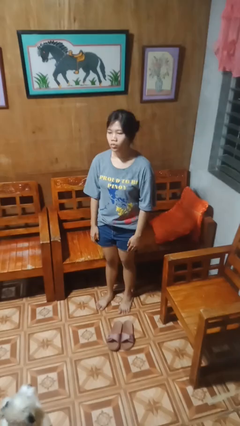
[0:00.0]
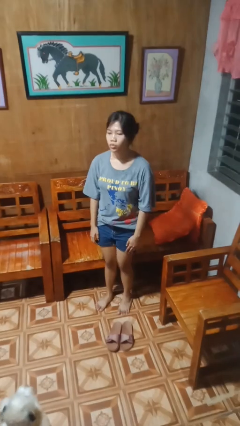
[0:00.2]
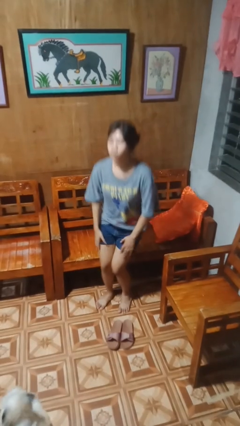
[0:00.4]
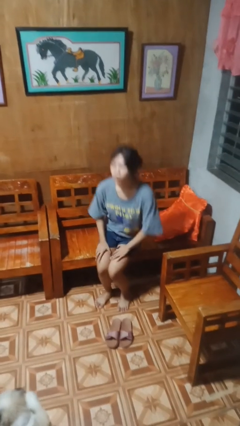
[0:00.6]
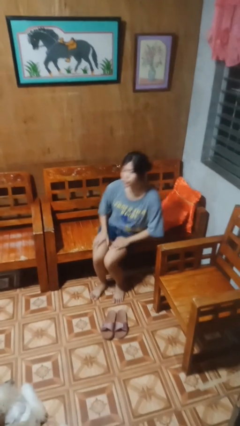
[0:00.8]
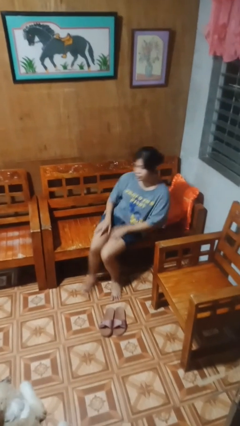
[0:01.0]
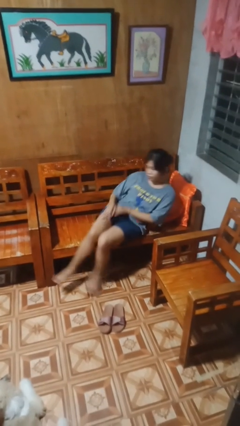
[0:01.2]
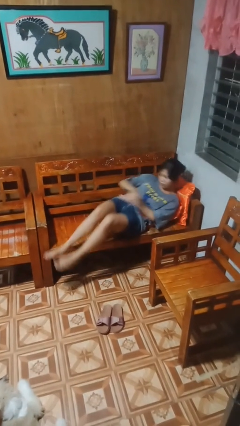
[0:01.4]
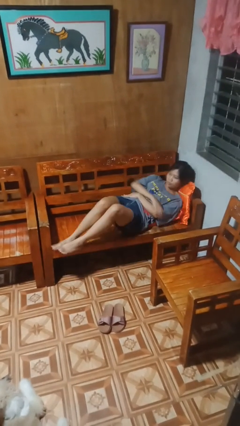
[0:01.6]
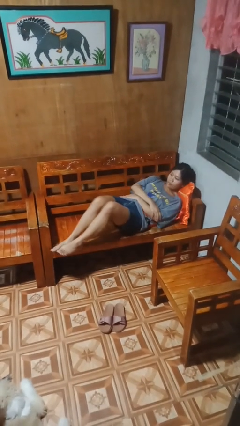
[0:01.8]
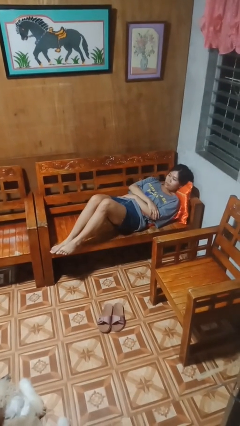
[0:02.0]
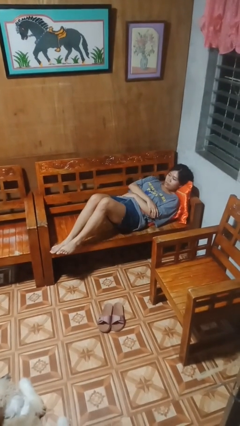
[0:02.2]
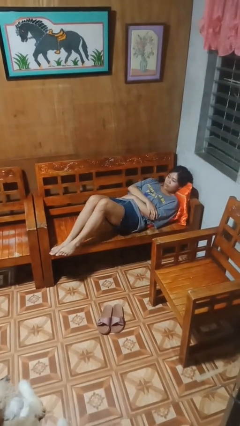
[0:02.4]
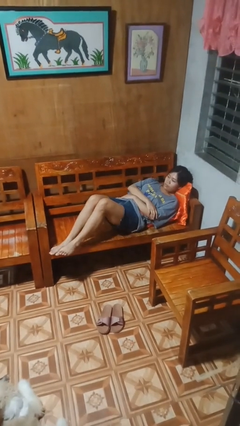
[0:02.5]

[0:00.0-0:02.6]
person lies down on couch

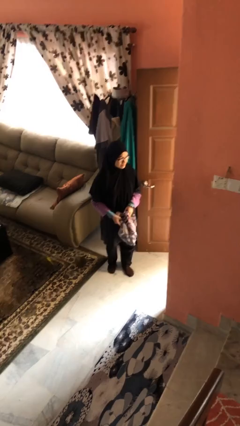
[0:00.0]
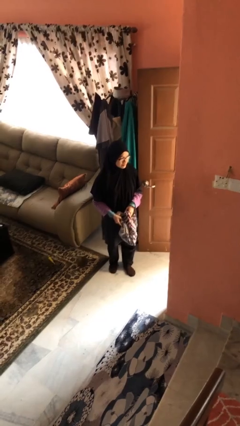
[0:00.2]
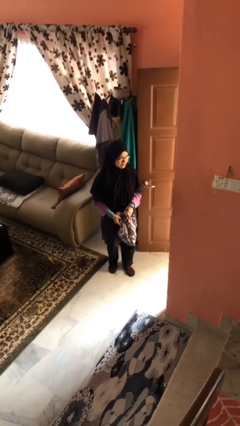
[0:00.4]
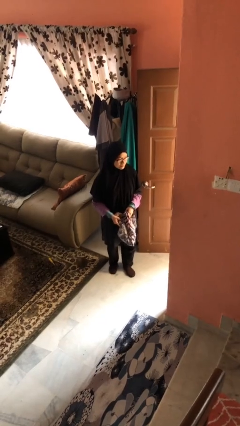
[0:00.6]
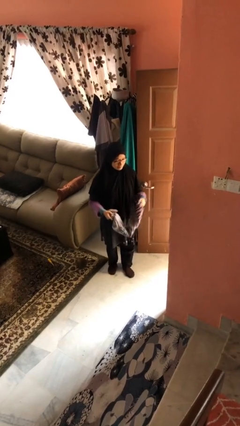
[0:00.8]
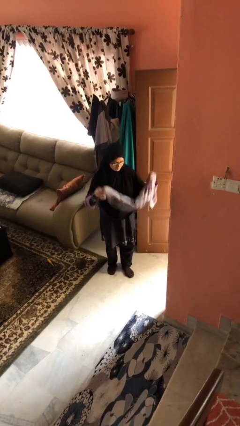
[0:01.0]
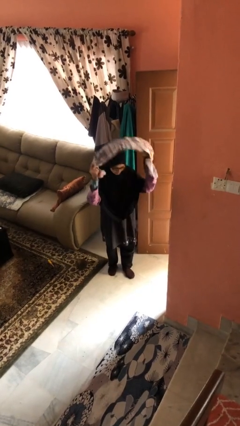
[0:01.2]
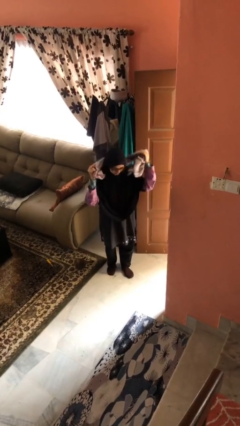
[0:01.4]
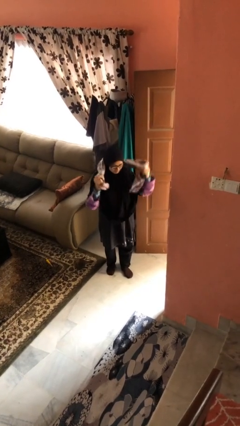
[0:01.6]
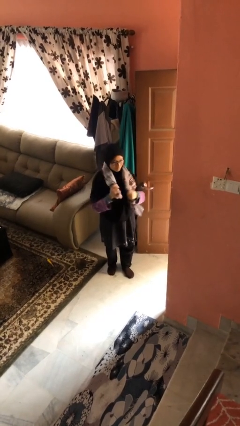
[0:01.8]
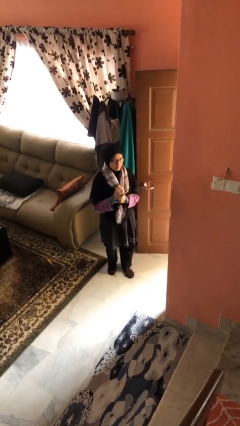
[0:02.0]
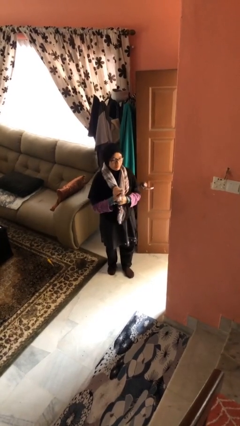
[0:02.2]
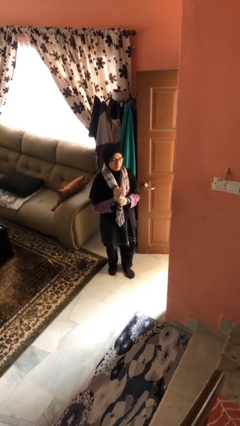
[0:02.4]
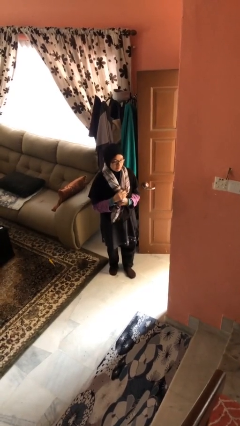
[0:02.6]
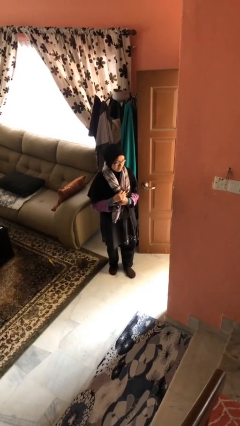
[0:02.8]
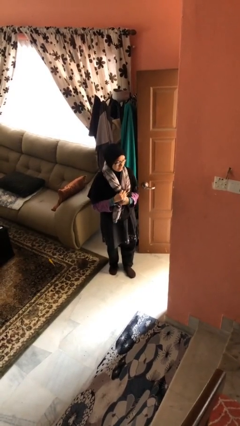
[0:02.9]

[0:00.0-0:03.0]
person puts on scarf

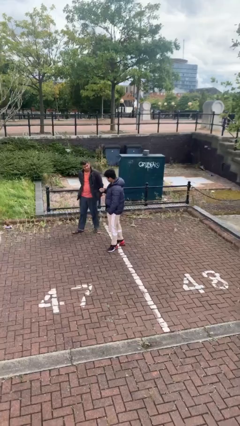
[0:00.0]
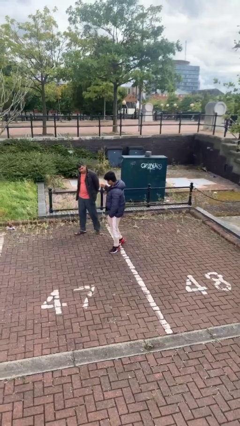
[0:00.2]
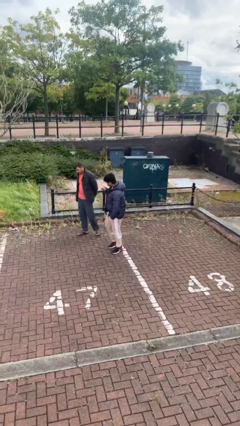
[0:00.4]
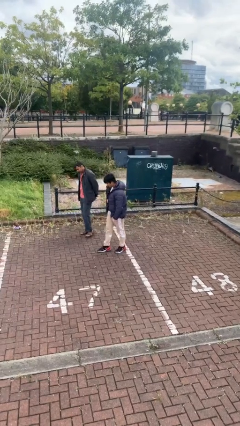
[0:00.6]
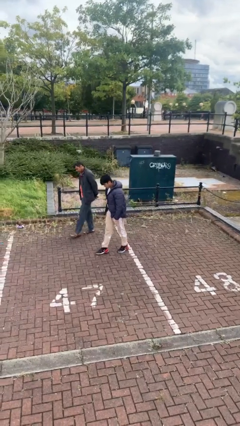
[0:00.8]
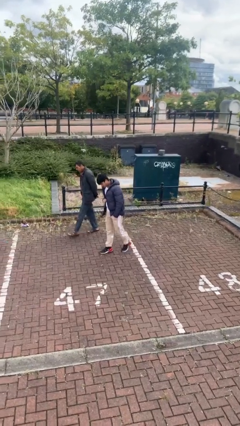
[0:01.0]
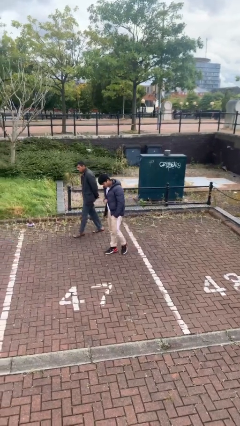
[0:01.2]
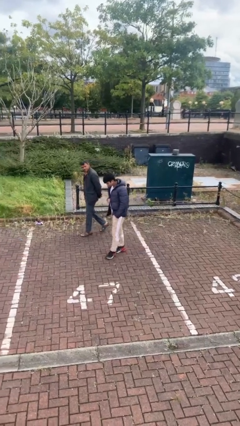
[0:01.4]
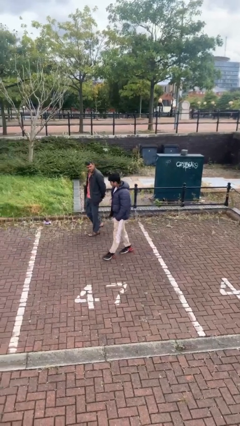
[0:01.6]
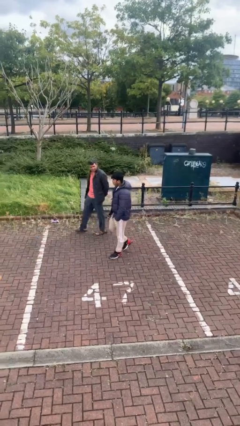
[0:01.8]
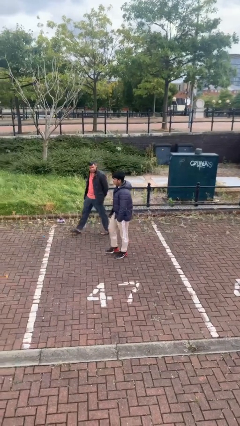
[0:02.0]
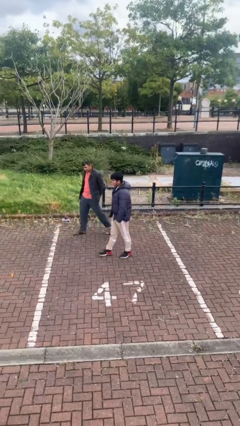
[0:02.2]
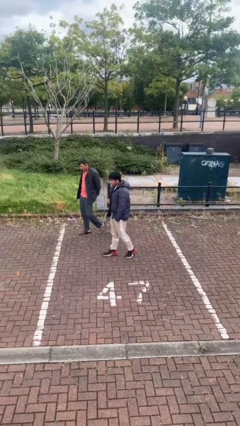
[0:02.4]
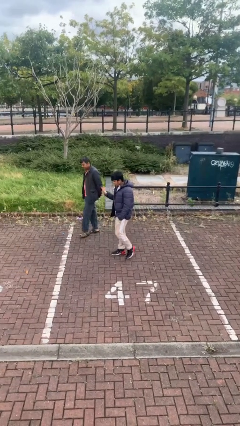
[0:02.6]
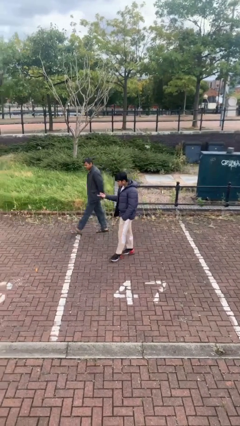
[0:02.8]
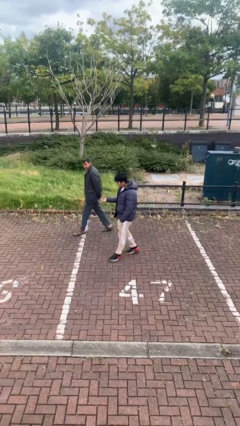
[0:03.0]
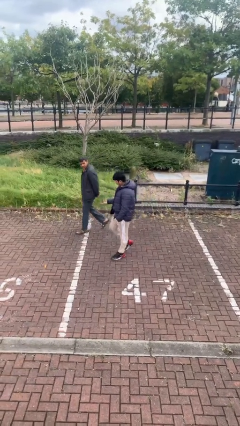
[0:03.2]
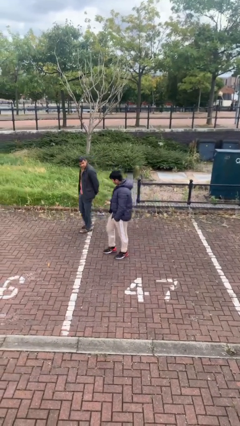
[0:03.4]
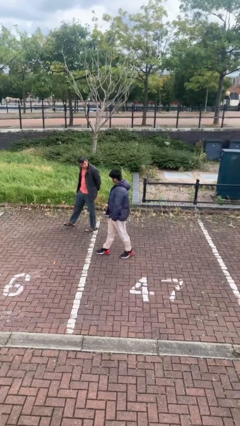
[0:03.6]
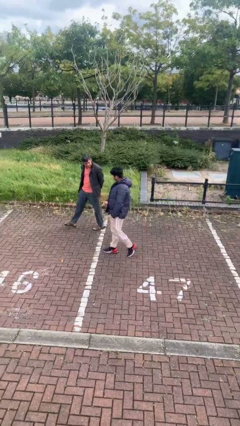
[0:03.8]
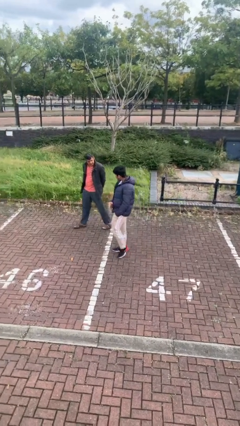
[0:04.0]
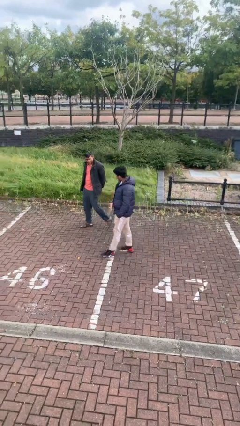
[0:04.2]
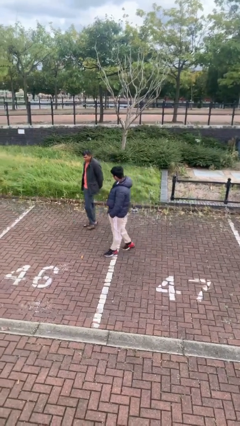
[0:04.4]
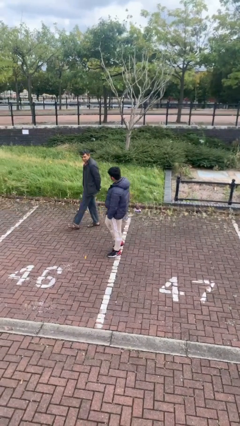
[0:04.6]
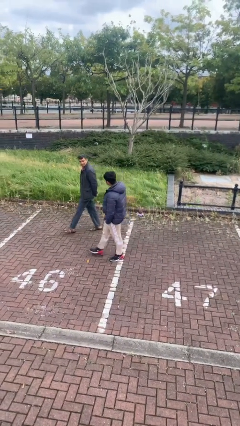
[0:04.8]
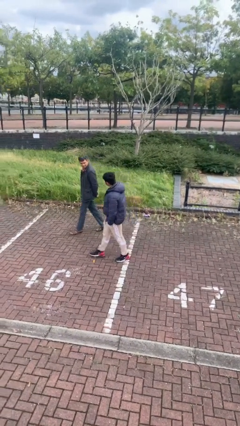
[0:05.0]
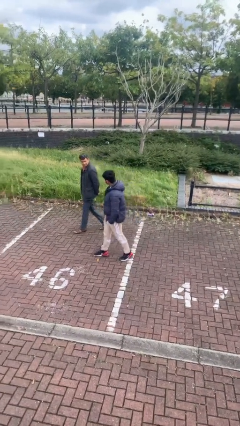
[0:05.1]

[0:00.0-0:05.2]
person talks to person

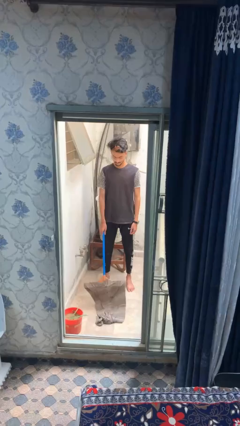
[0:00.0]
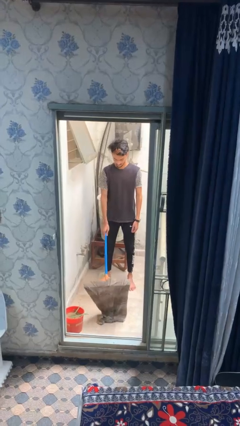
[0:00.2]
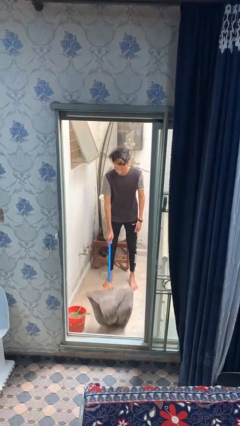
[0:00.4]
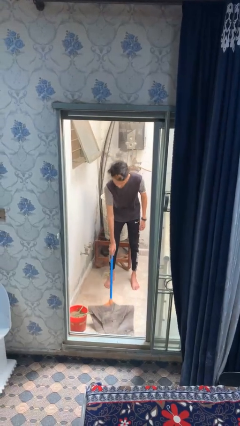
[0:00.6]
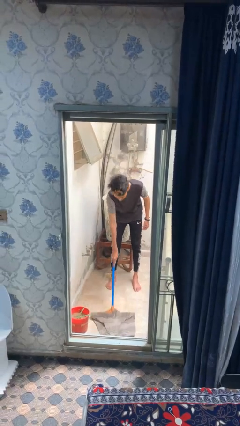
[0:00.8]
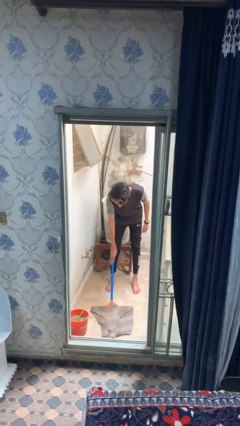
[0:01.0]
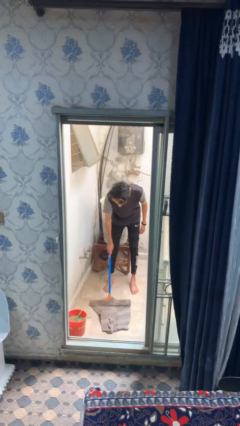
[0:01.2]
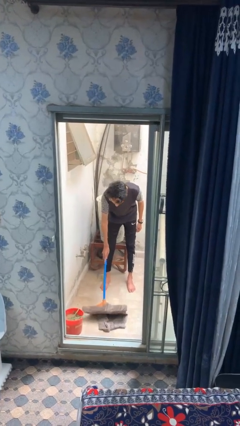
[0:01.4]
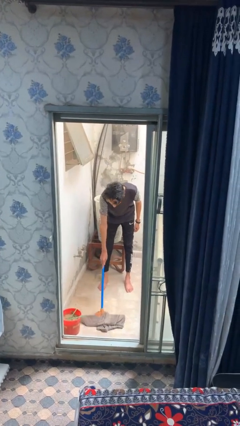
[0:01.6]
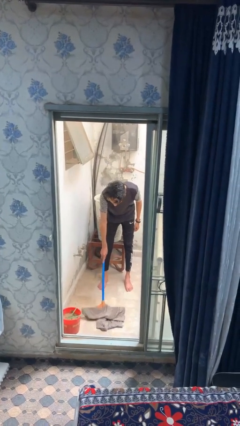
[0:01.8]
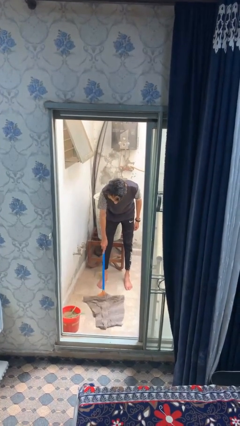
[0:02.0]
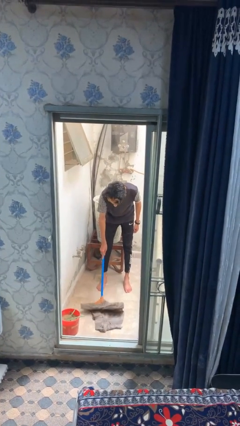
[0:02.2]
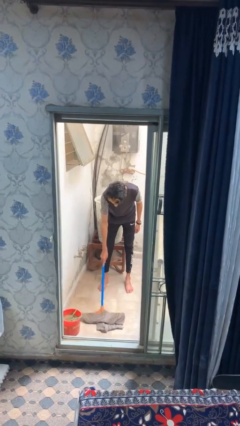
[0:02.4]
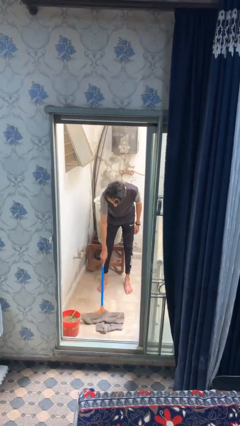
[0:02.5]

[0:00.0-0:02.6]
person mops

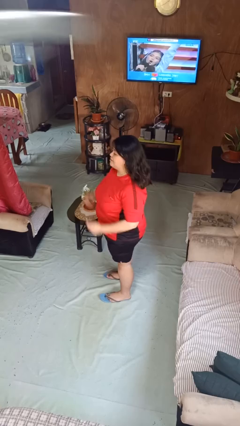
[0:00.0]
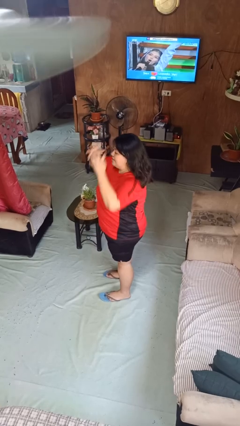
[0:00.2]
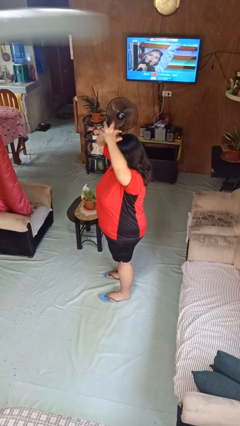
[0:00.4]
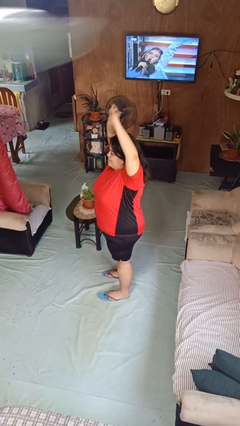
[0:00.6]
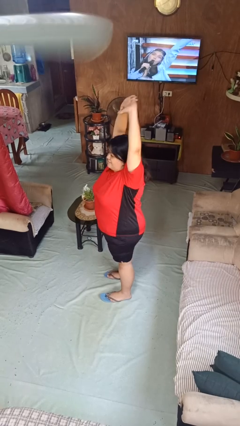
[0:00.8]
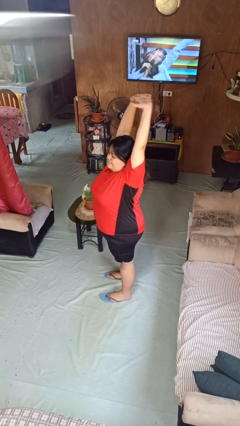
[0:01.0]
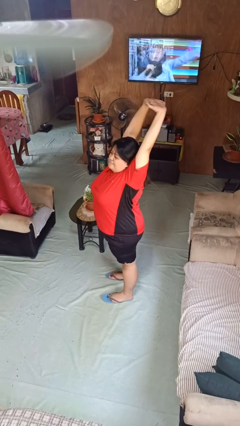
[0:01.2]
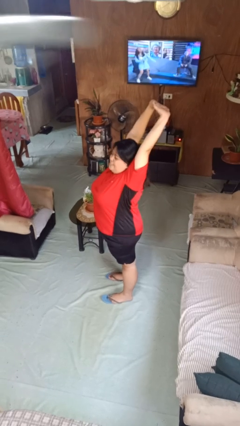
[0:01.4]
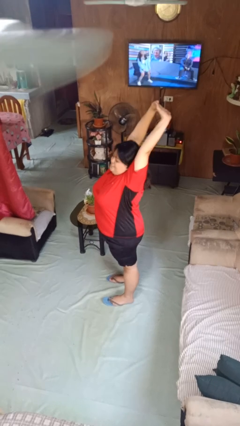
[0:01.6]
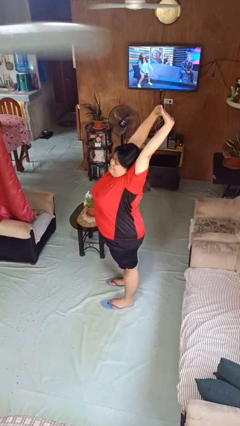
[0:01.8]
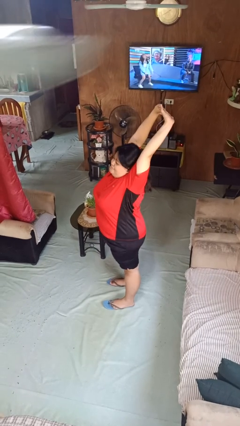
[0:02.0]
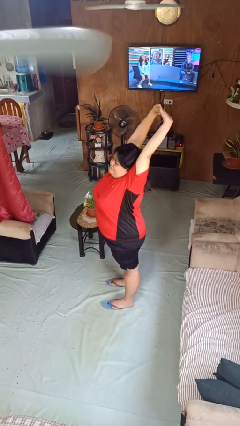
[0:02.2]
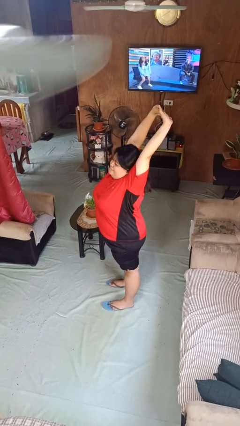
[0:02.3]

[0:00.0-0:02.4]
person stretches arms over head

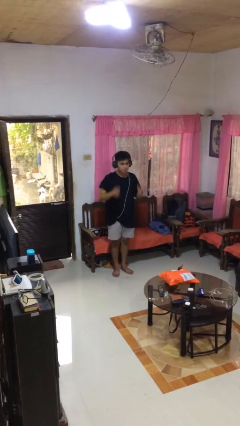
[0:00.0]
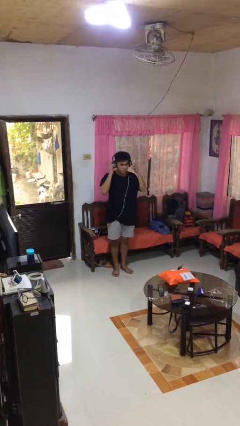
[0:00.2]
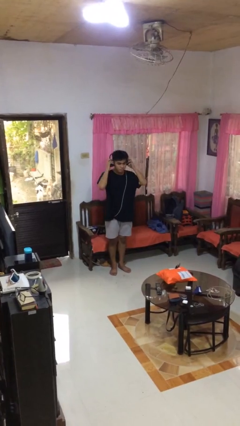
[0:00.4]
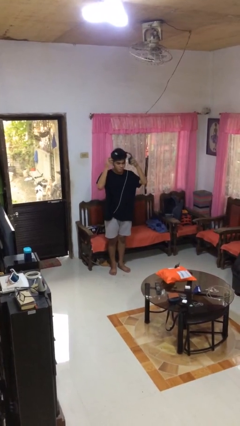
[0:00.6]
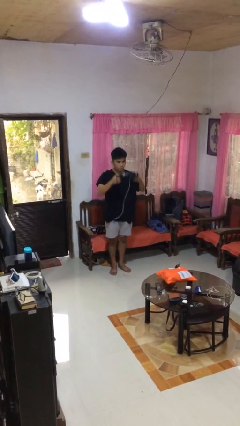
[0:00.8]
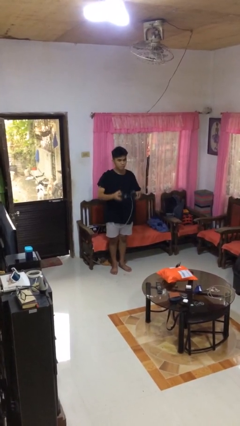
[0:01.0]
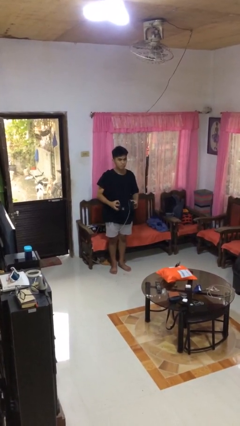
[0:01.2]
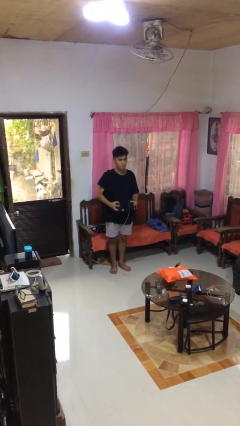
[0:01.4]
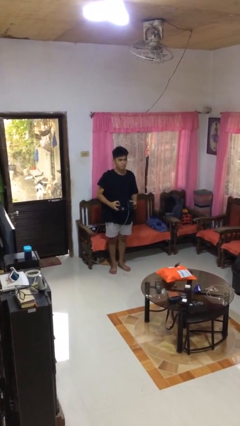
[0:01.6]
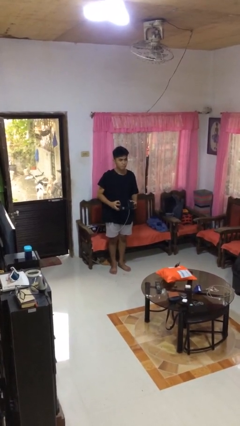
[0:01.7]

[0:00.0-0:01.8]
person takes off headphones
